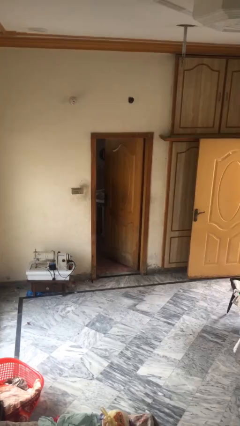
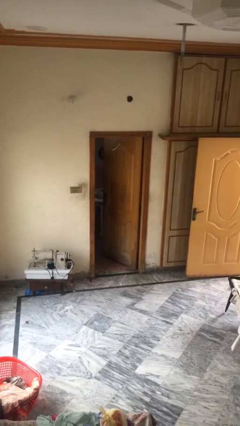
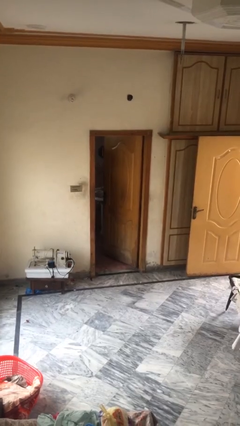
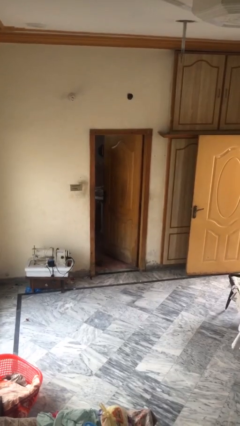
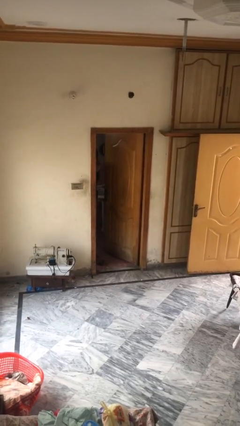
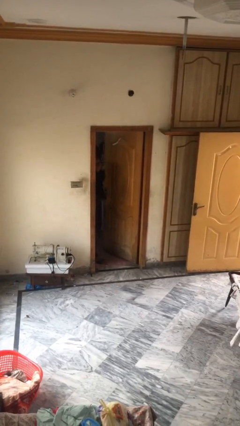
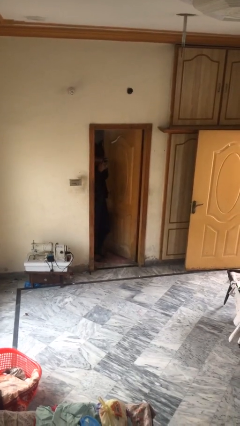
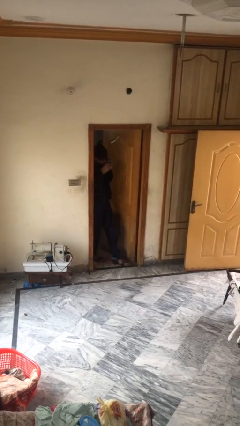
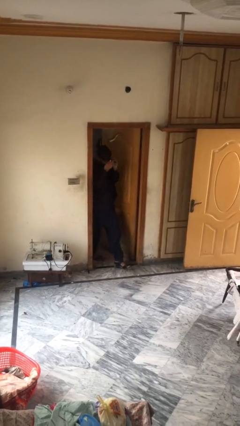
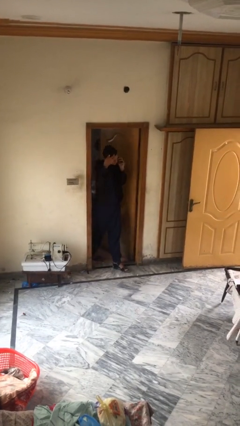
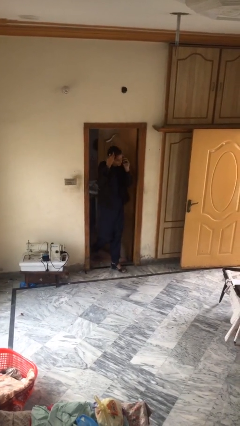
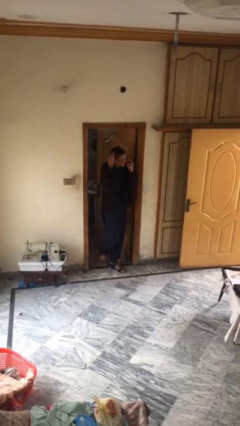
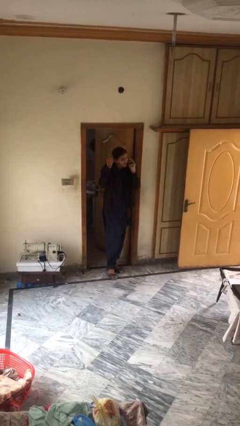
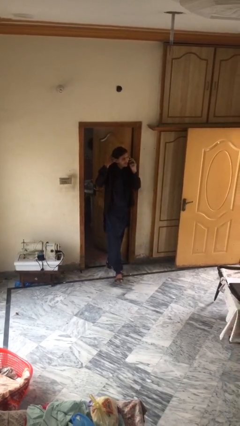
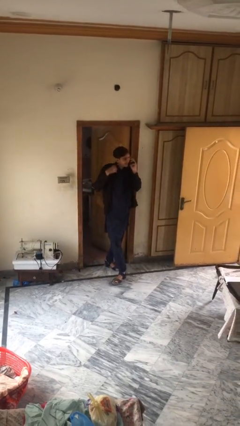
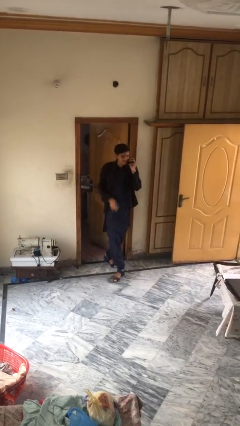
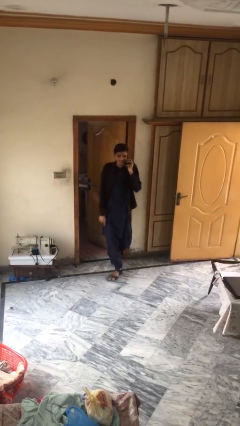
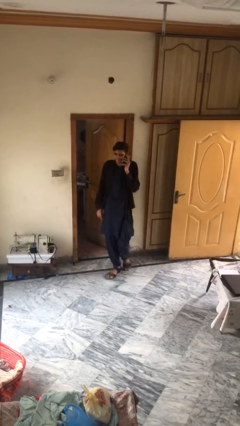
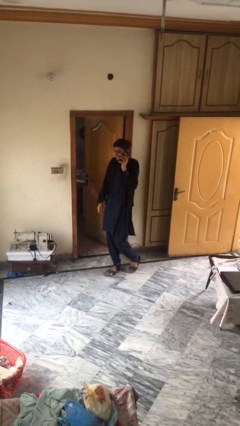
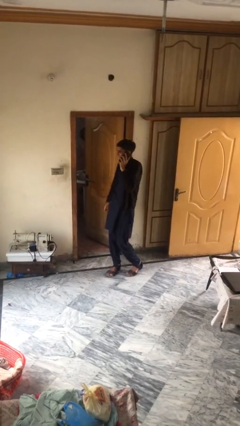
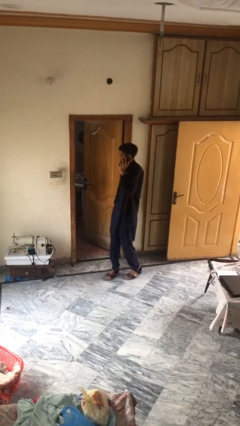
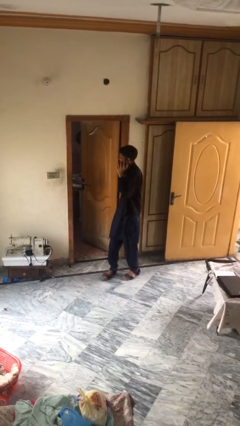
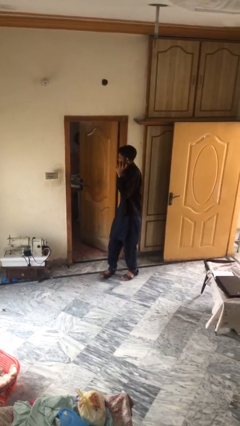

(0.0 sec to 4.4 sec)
person enters scene through structure

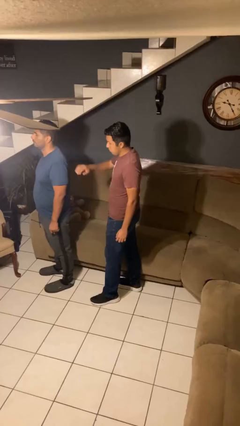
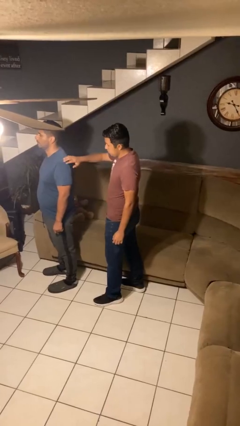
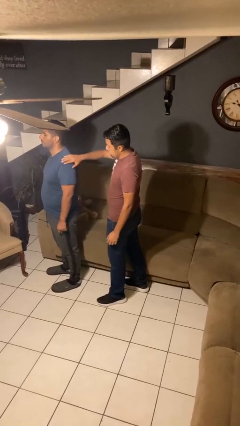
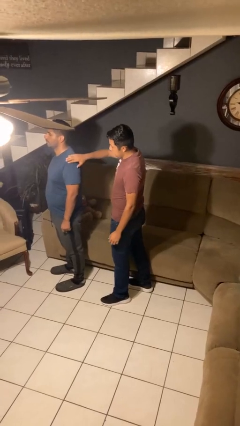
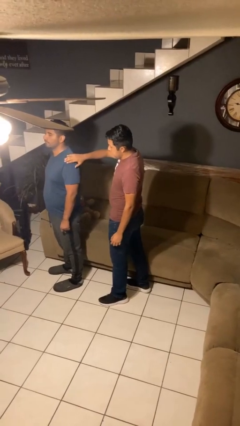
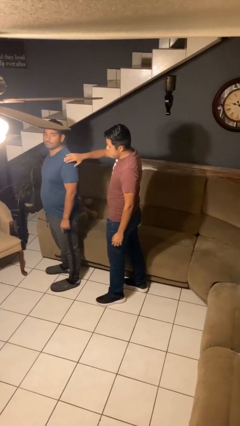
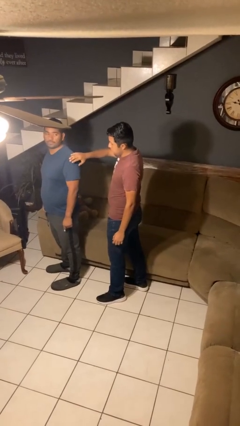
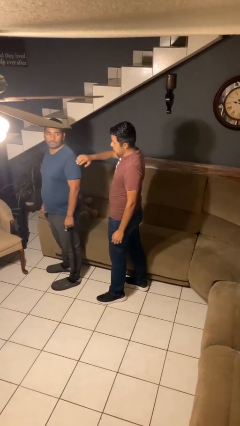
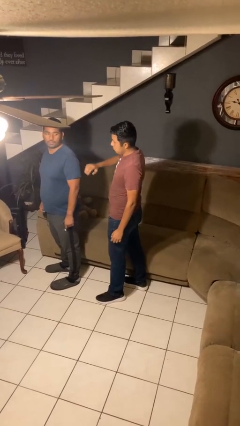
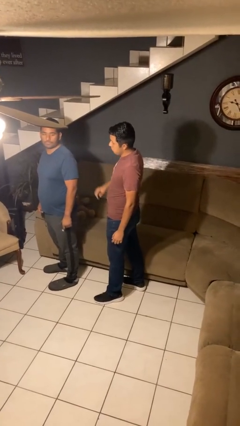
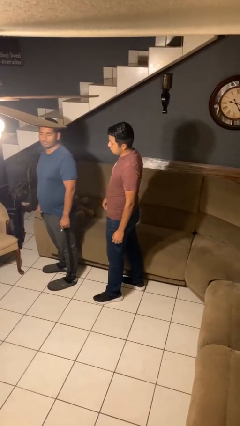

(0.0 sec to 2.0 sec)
person touches back of person

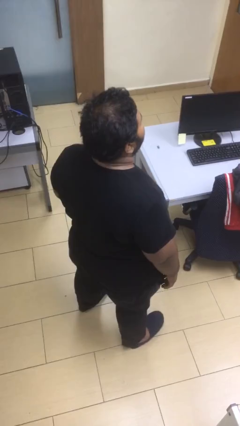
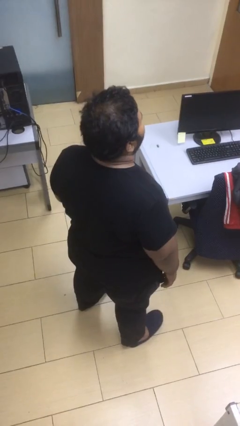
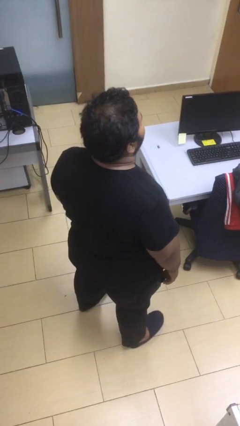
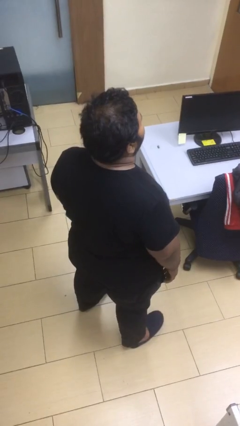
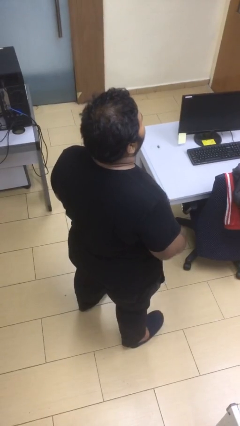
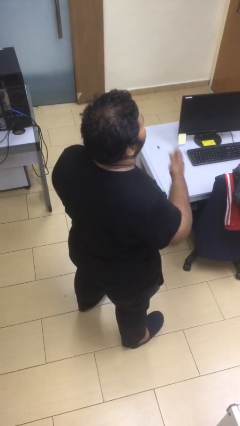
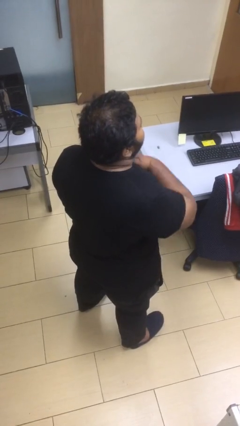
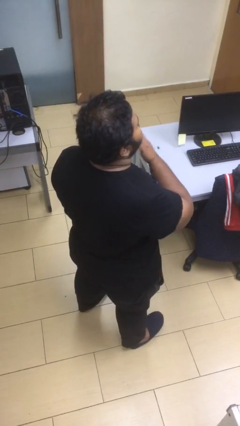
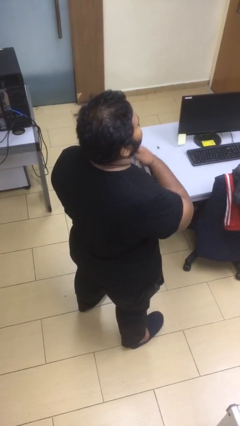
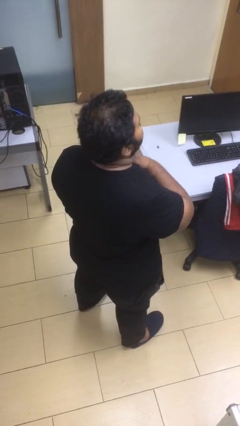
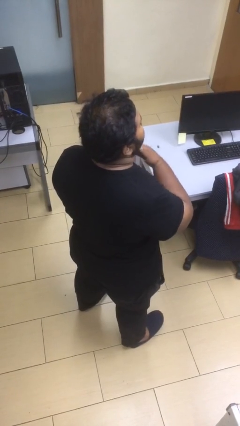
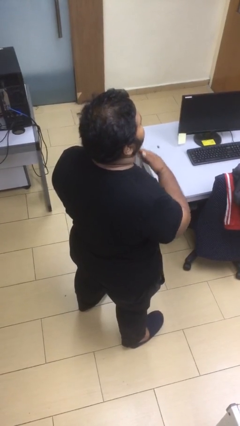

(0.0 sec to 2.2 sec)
person drums on chest

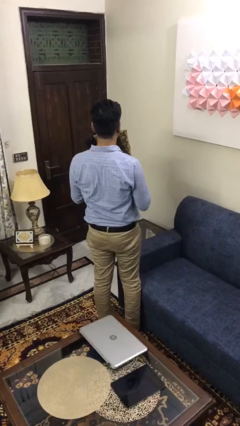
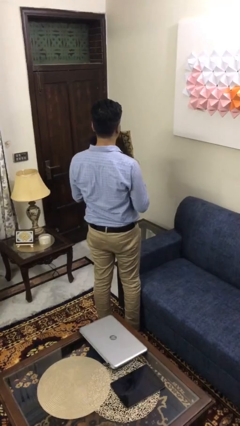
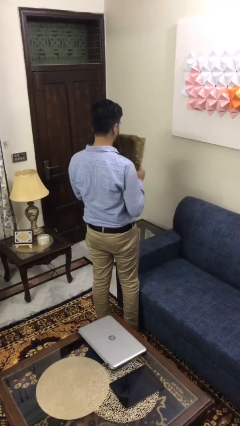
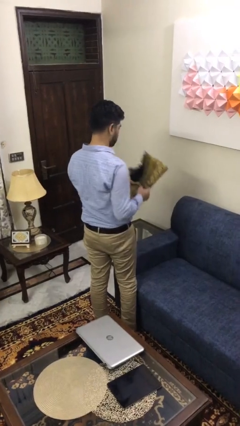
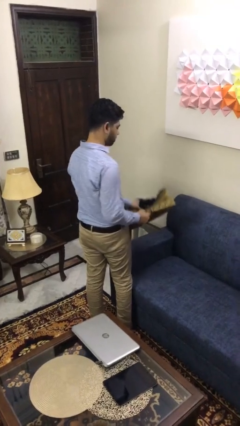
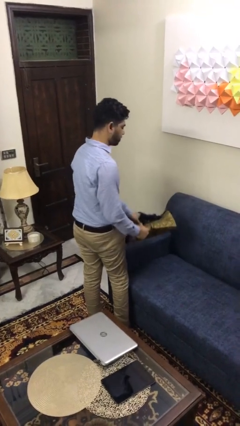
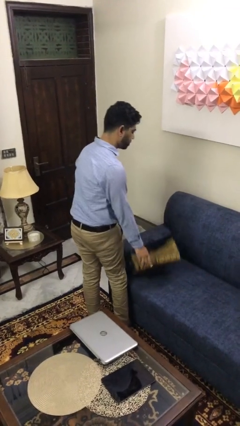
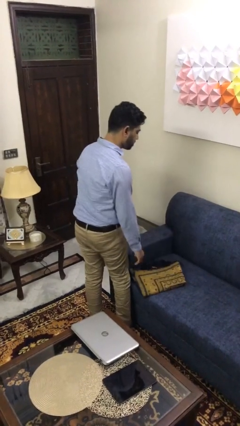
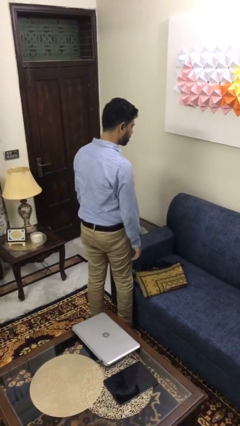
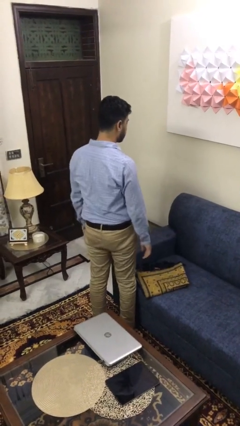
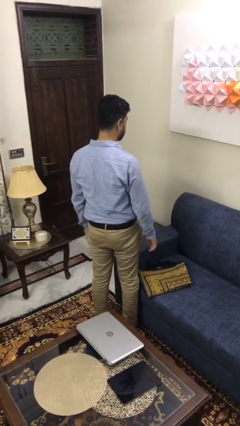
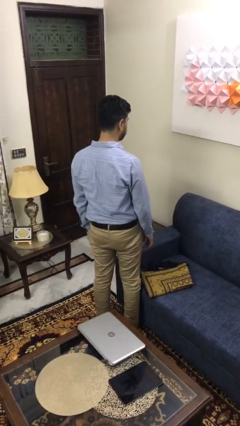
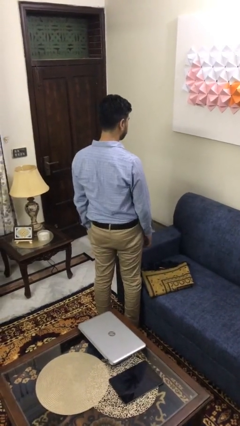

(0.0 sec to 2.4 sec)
person puts down object on couch

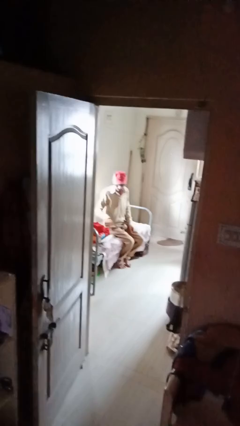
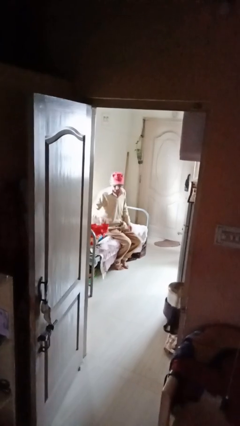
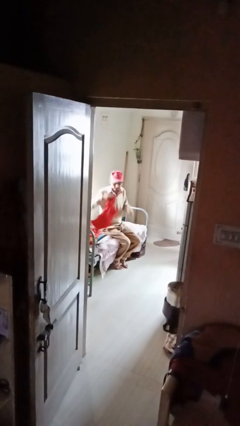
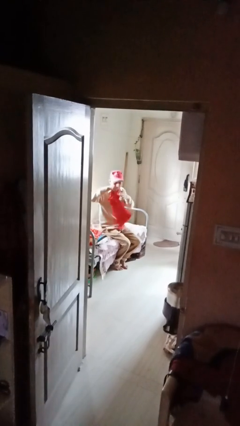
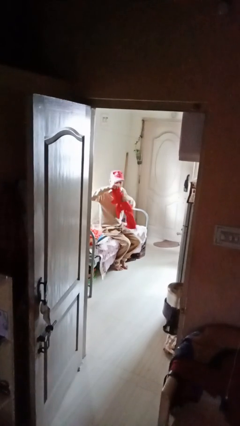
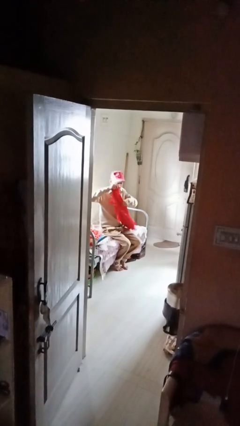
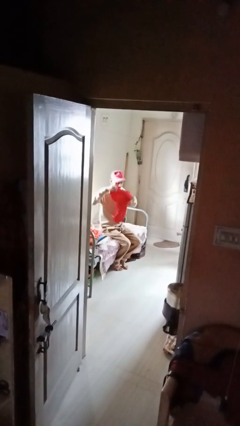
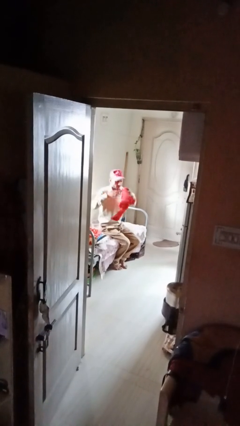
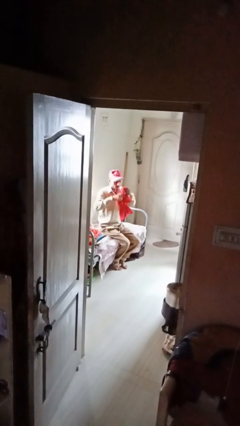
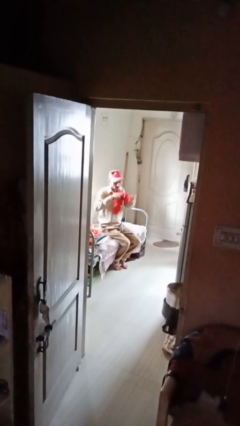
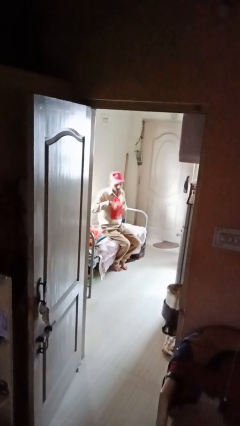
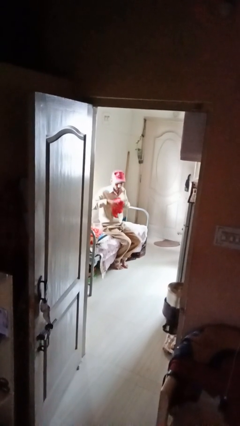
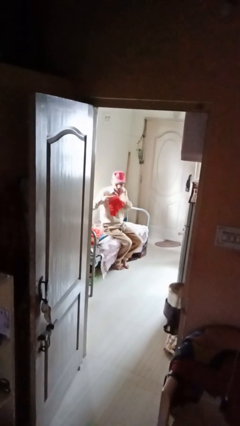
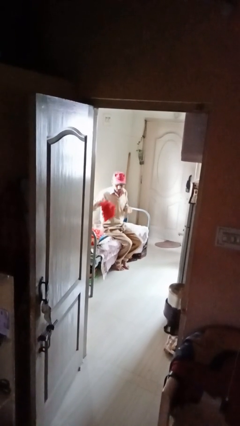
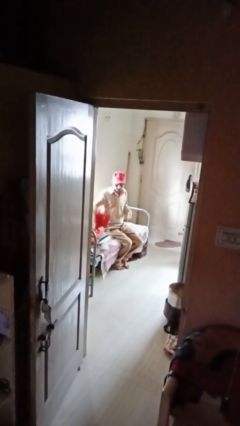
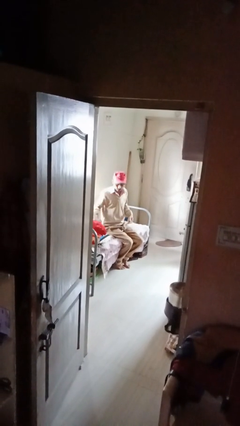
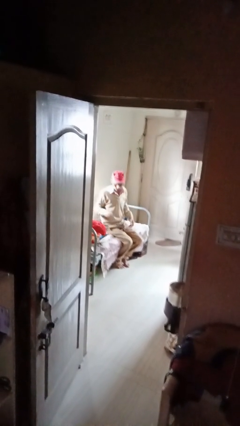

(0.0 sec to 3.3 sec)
person folds shirt

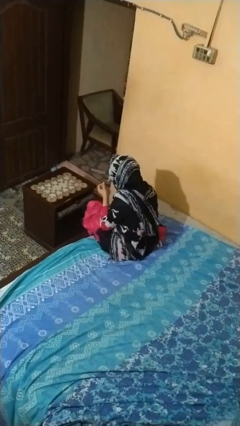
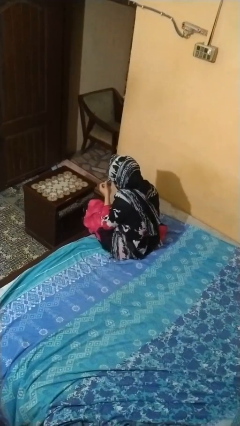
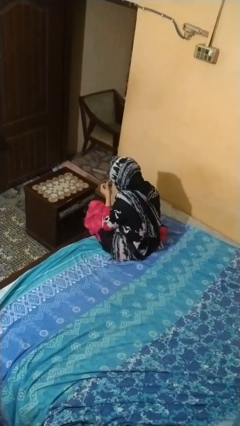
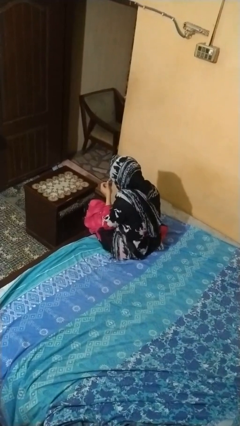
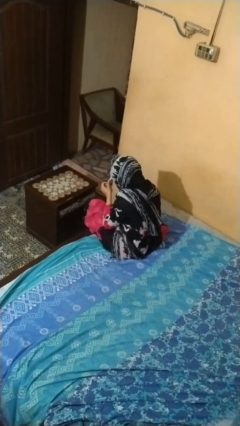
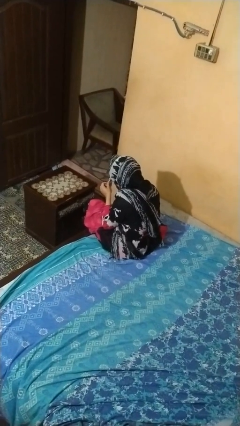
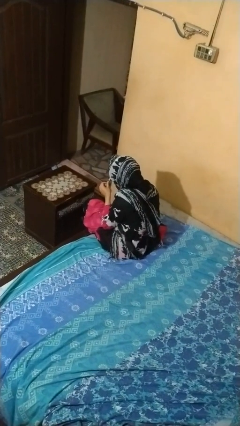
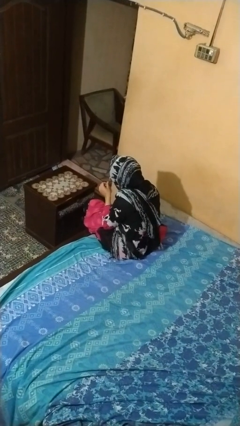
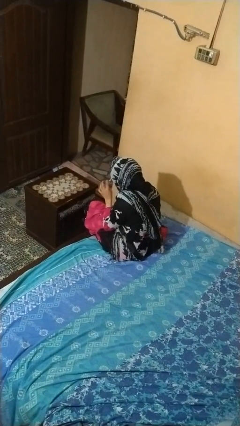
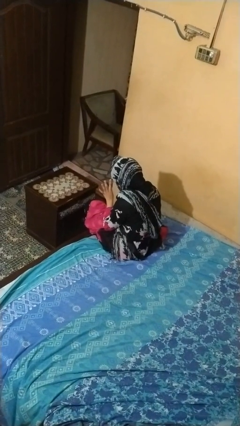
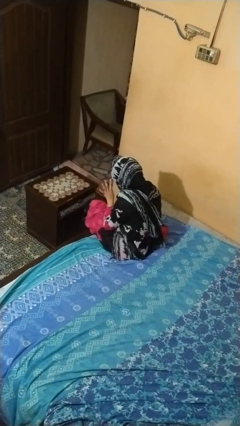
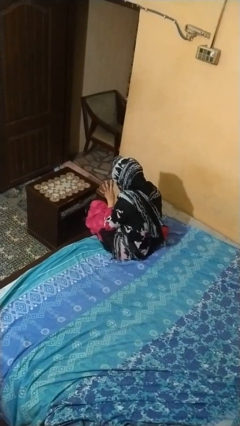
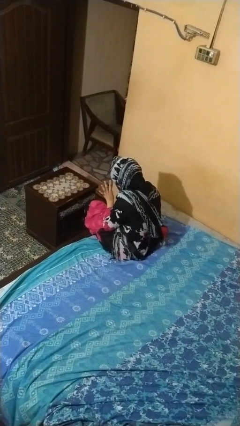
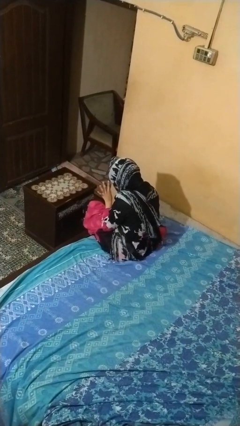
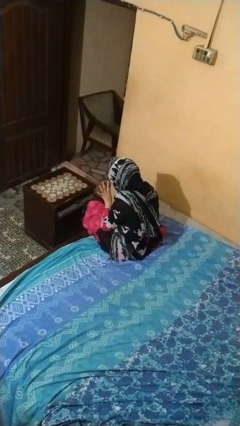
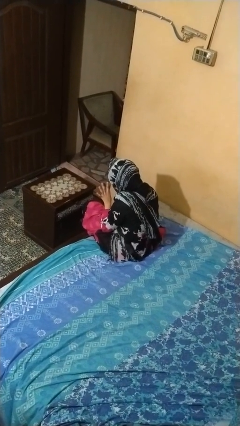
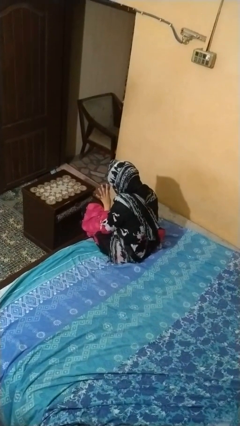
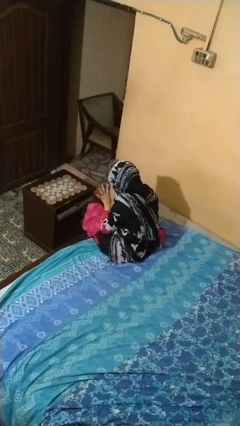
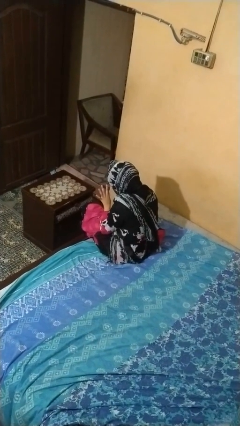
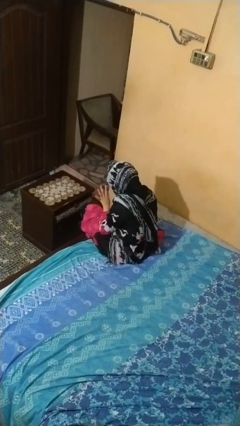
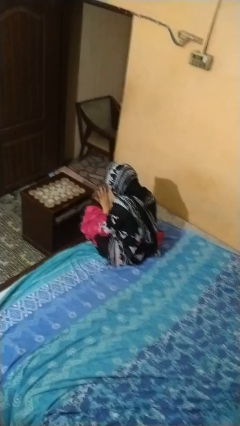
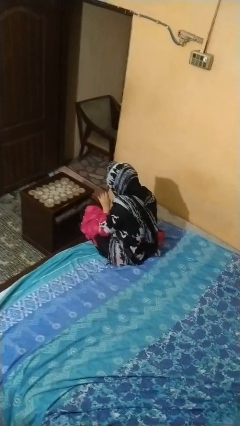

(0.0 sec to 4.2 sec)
person clips fingernails
